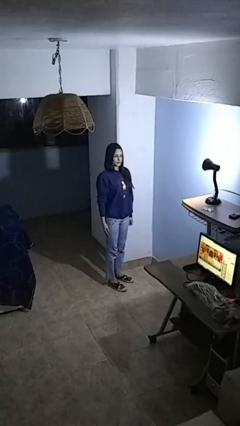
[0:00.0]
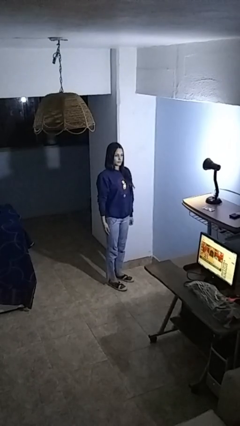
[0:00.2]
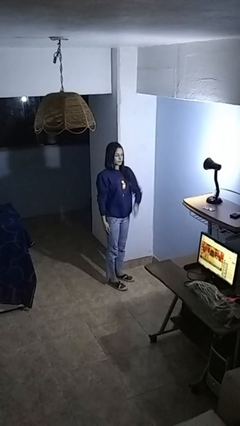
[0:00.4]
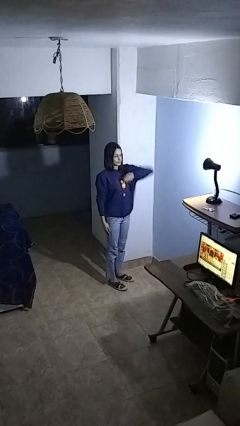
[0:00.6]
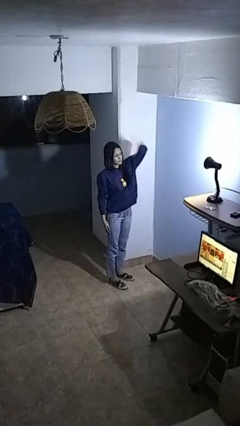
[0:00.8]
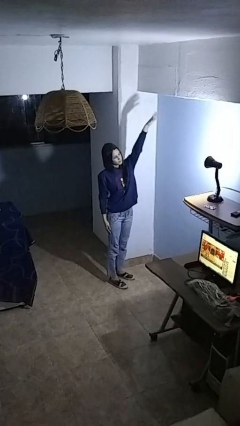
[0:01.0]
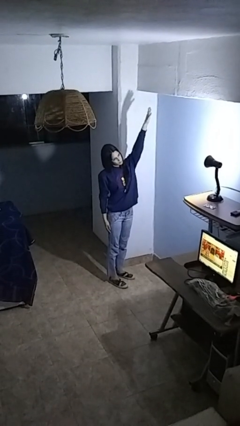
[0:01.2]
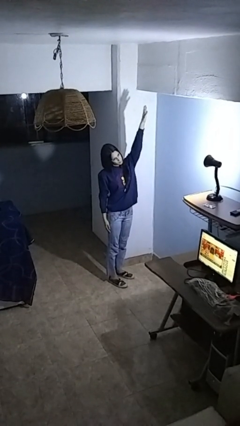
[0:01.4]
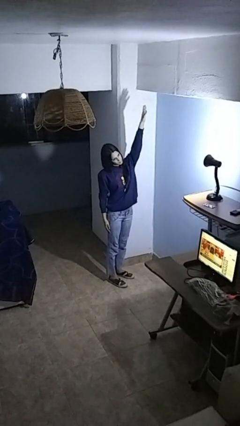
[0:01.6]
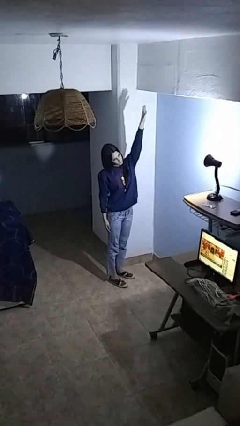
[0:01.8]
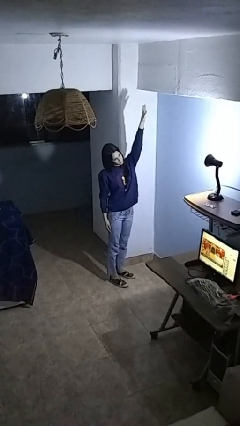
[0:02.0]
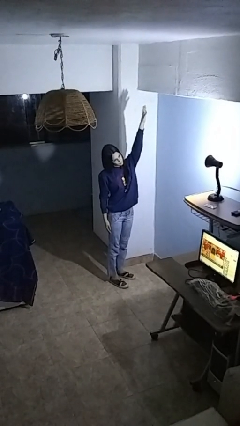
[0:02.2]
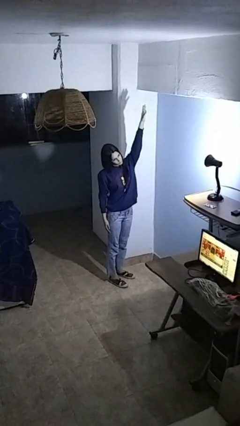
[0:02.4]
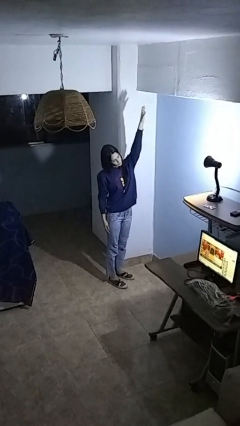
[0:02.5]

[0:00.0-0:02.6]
person gestures swipe up

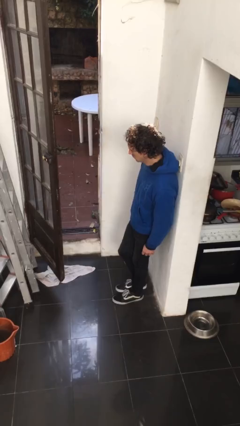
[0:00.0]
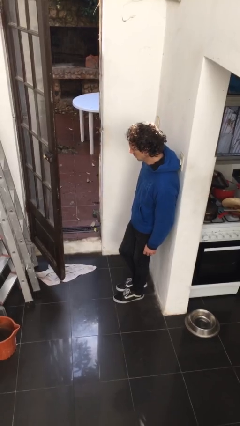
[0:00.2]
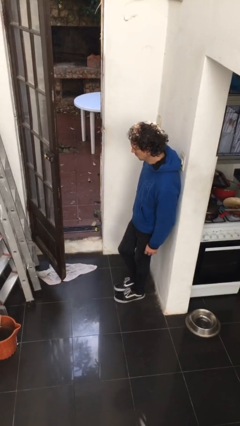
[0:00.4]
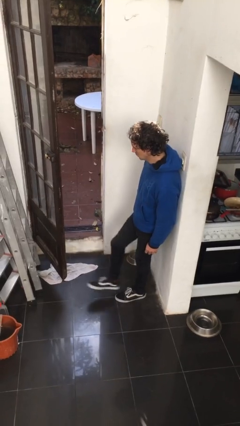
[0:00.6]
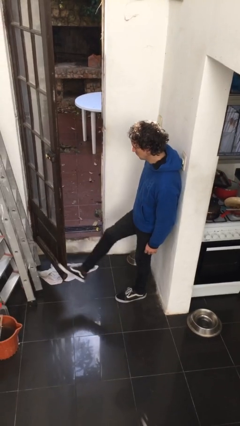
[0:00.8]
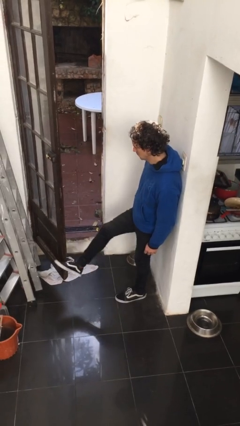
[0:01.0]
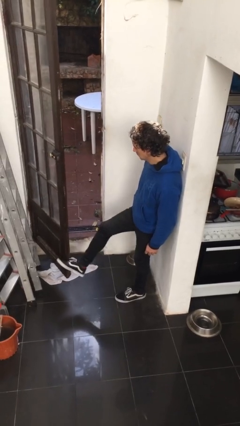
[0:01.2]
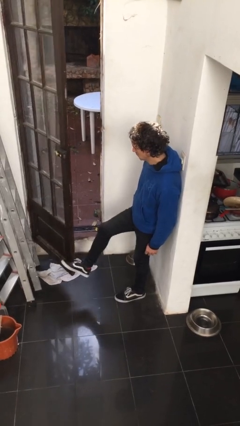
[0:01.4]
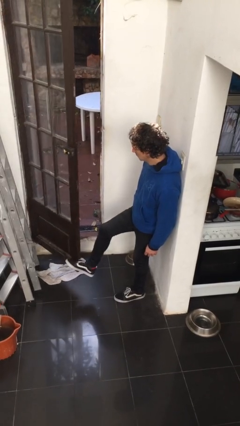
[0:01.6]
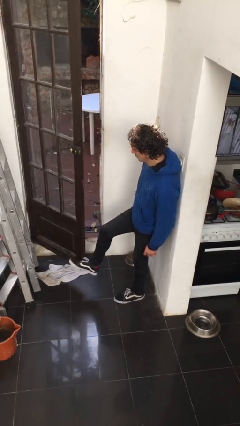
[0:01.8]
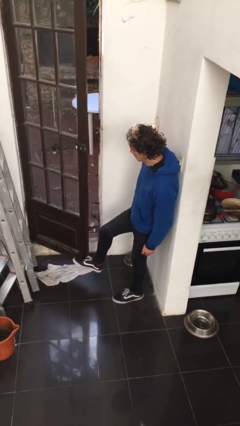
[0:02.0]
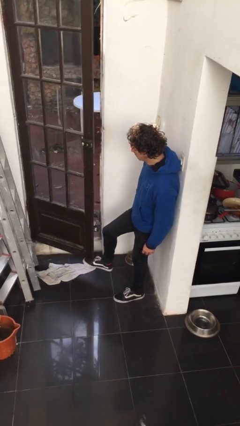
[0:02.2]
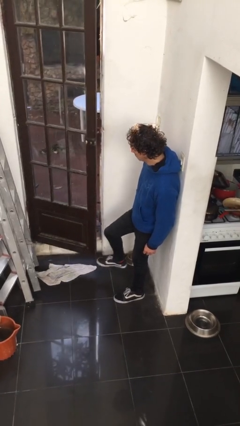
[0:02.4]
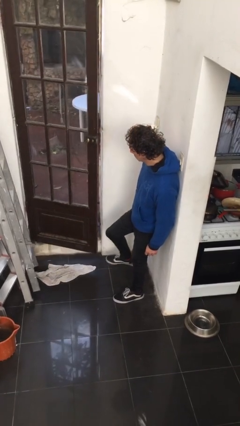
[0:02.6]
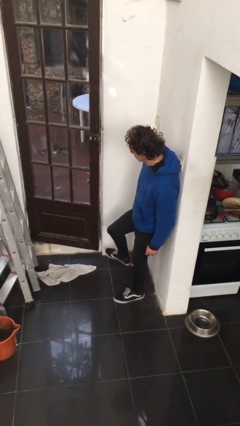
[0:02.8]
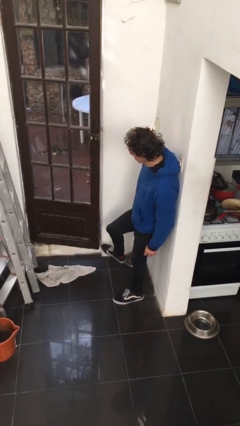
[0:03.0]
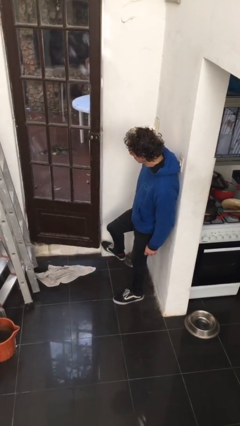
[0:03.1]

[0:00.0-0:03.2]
person closes door with foot

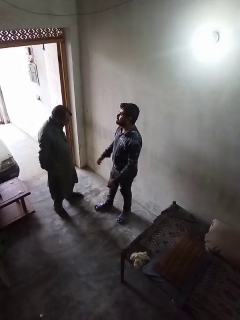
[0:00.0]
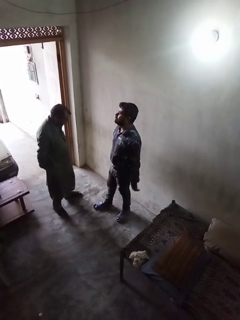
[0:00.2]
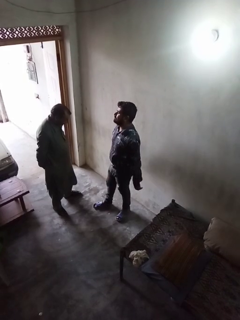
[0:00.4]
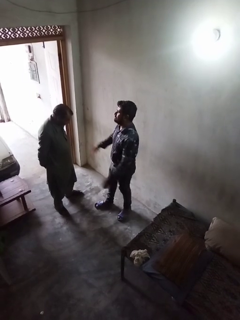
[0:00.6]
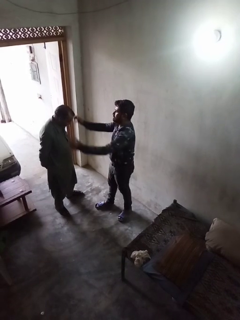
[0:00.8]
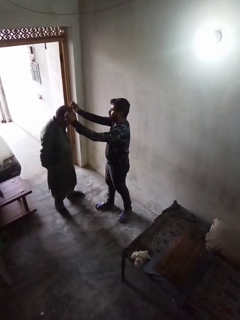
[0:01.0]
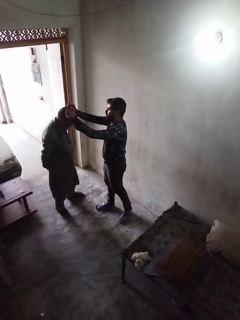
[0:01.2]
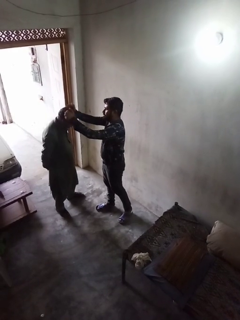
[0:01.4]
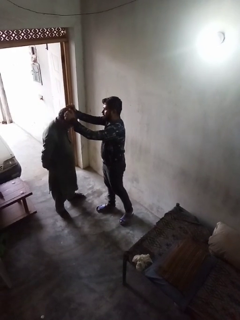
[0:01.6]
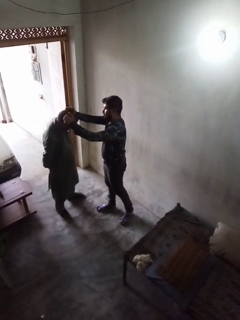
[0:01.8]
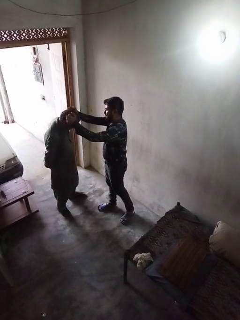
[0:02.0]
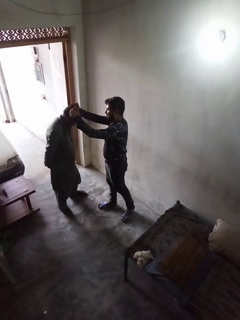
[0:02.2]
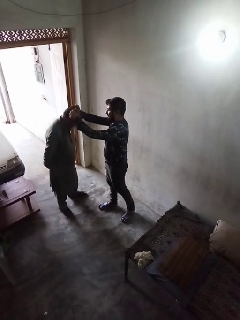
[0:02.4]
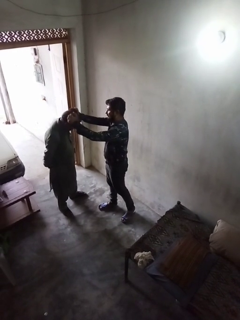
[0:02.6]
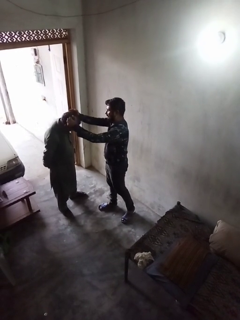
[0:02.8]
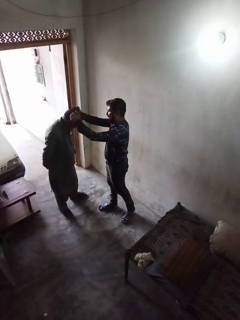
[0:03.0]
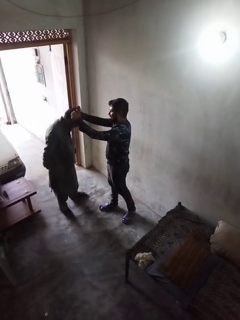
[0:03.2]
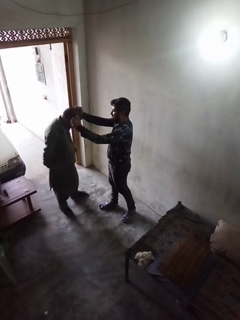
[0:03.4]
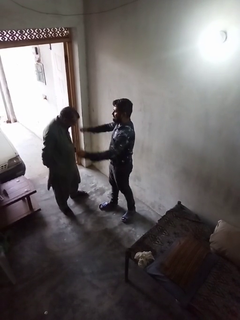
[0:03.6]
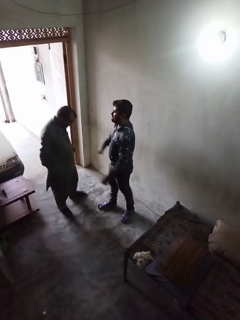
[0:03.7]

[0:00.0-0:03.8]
person grabs person by hair

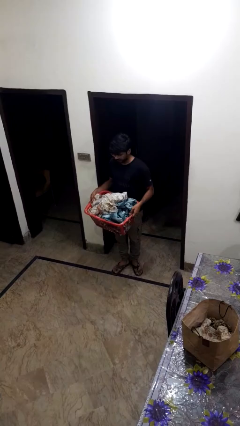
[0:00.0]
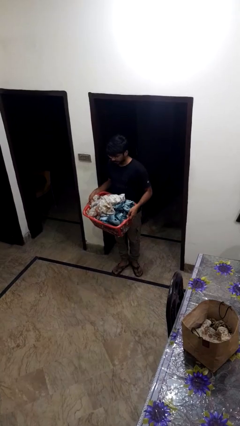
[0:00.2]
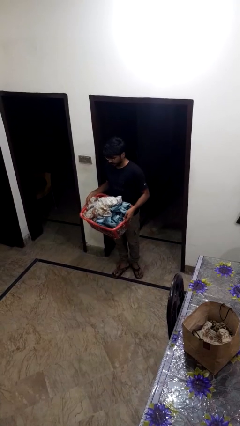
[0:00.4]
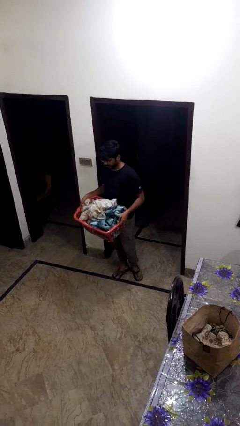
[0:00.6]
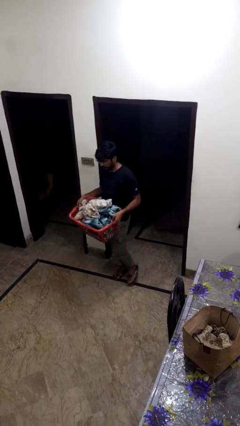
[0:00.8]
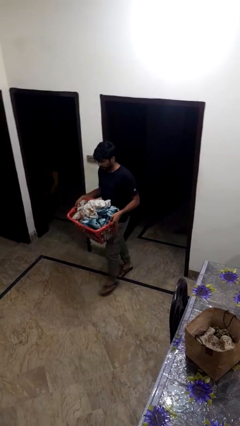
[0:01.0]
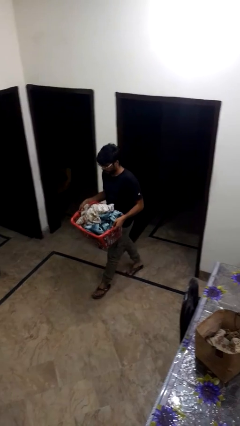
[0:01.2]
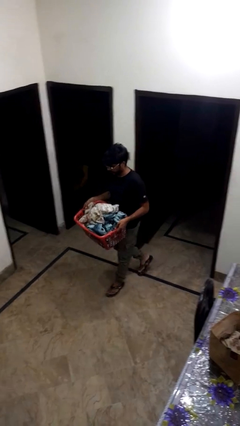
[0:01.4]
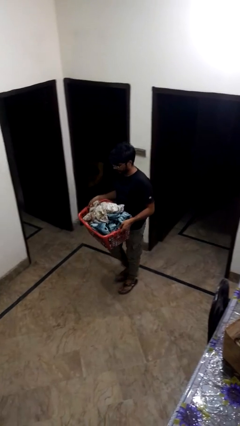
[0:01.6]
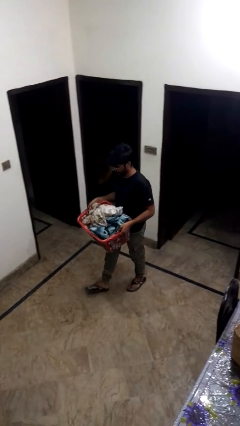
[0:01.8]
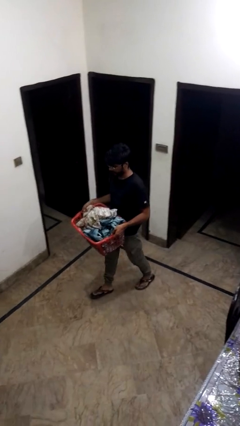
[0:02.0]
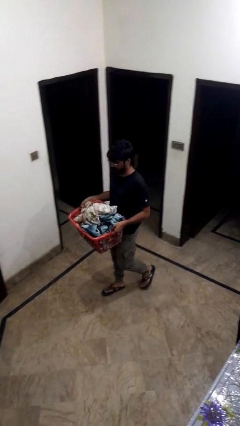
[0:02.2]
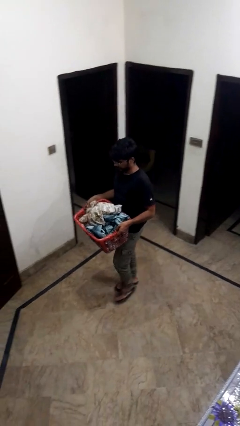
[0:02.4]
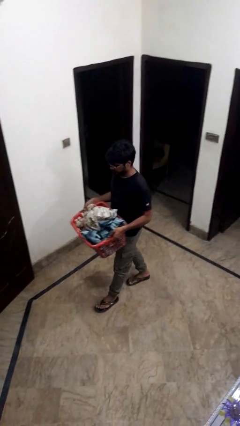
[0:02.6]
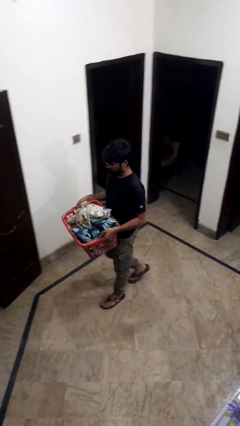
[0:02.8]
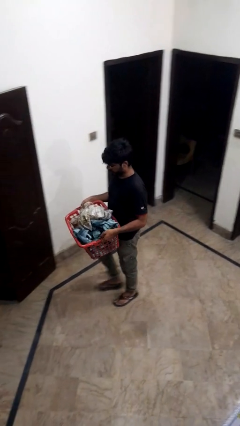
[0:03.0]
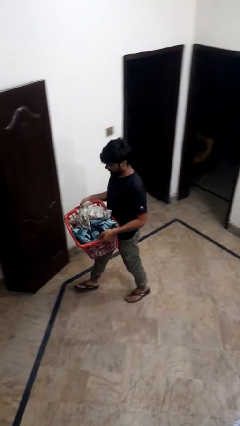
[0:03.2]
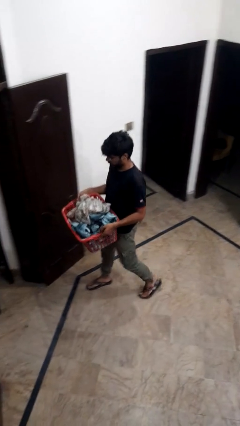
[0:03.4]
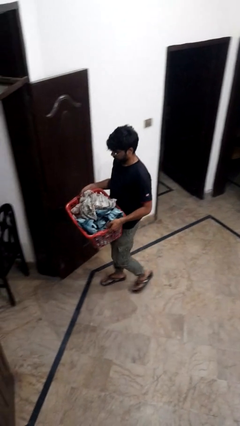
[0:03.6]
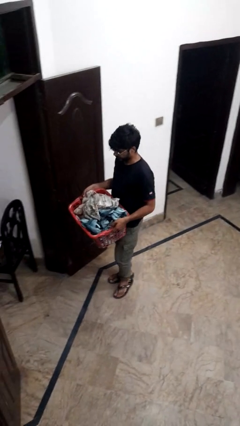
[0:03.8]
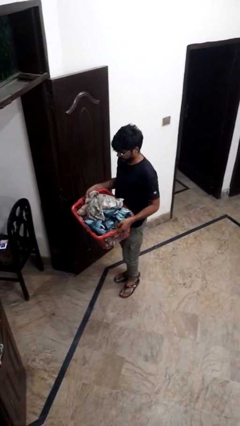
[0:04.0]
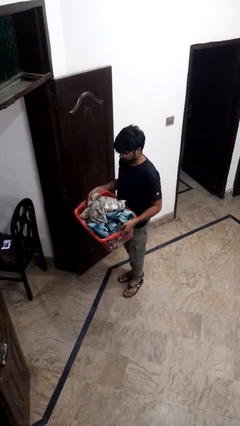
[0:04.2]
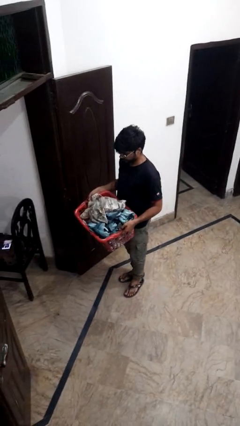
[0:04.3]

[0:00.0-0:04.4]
person carries laundry basket

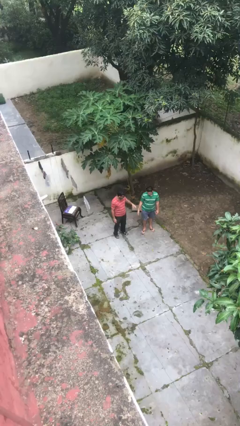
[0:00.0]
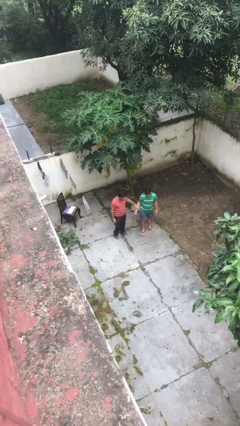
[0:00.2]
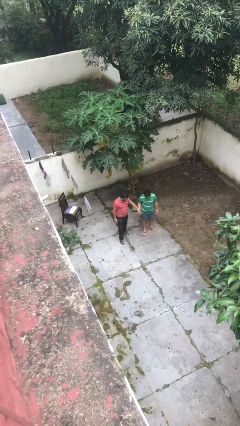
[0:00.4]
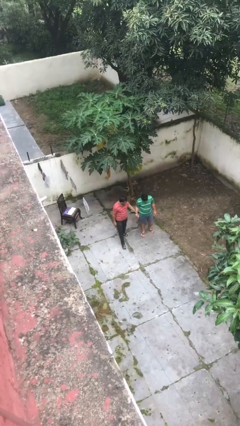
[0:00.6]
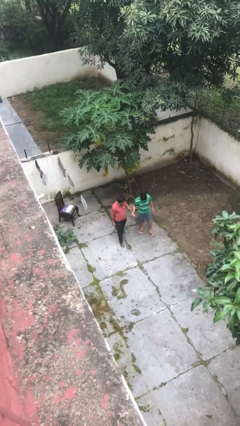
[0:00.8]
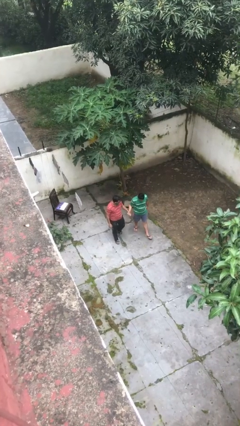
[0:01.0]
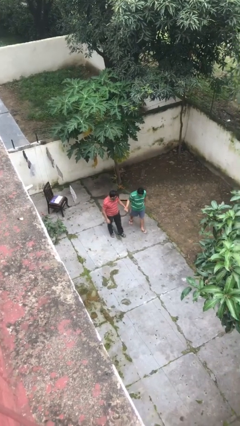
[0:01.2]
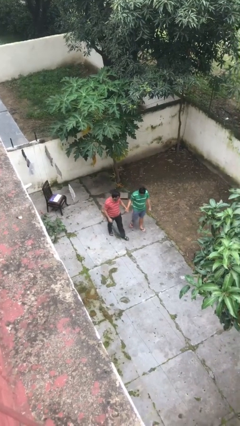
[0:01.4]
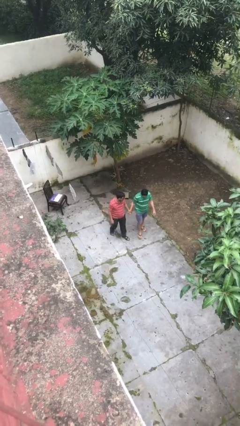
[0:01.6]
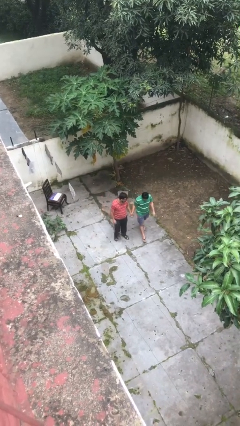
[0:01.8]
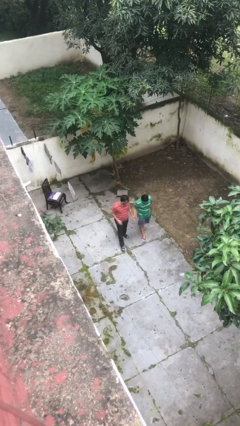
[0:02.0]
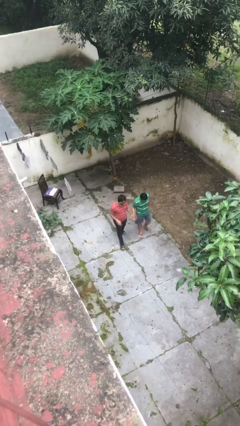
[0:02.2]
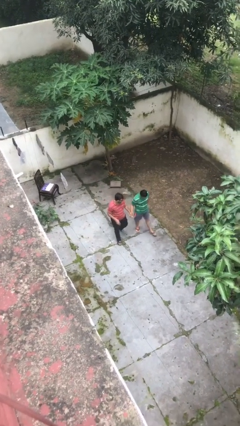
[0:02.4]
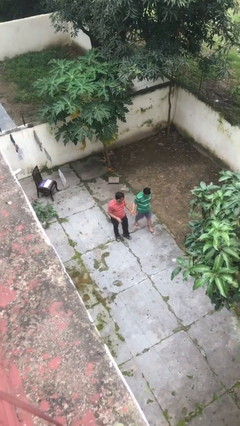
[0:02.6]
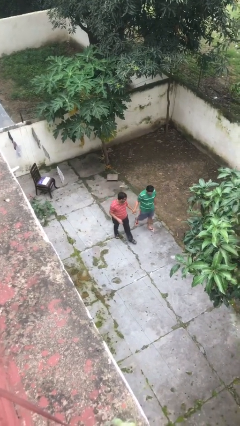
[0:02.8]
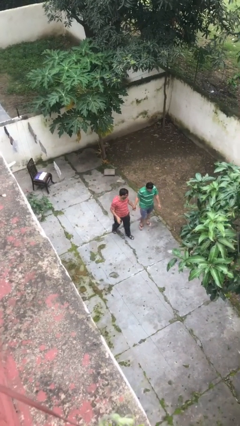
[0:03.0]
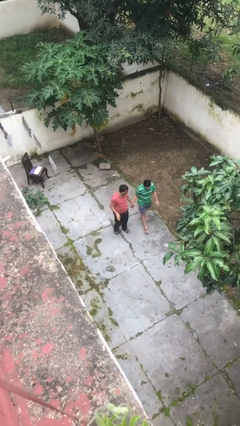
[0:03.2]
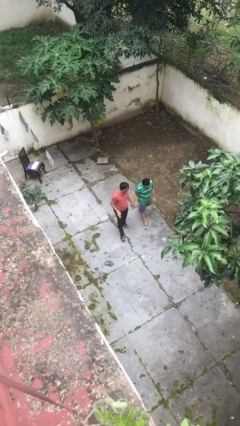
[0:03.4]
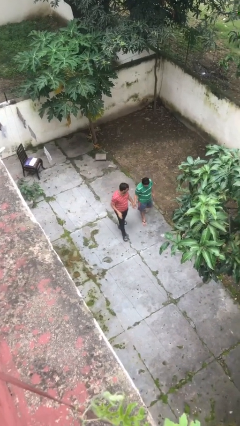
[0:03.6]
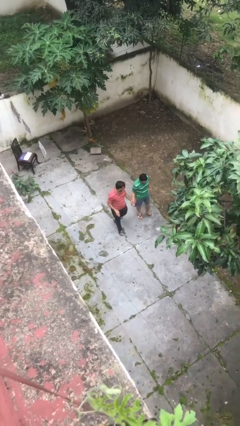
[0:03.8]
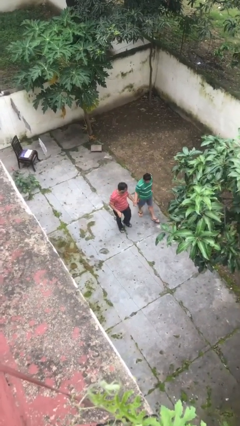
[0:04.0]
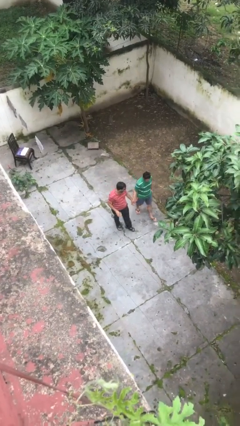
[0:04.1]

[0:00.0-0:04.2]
person holds hand
